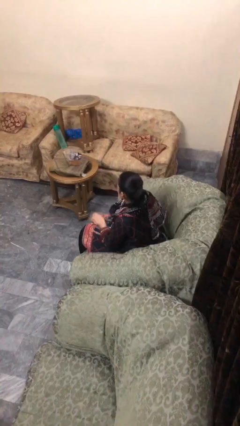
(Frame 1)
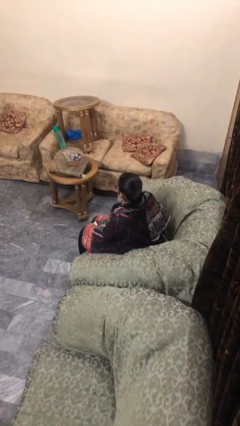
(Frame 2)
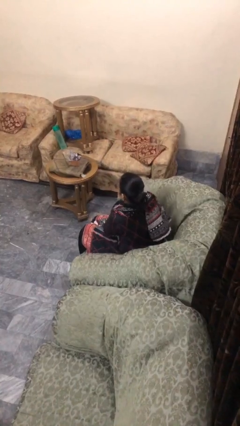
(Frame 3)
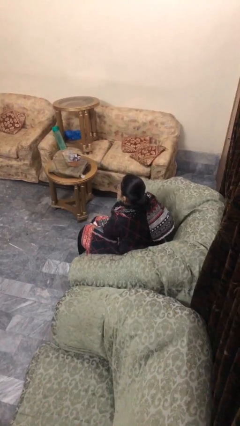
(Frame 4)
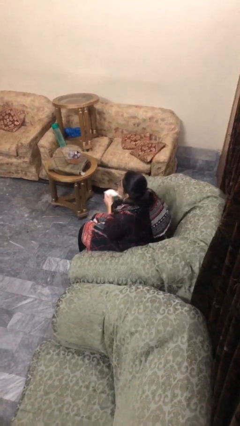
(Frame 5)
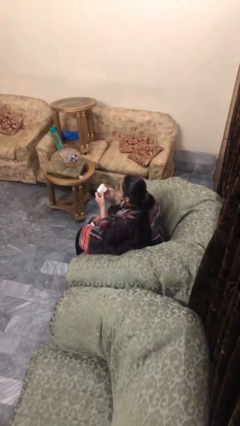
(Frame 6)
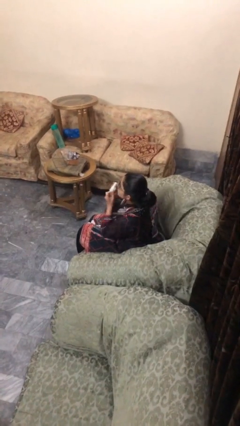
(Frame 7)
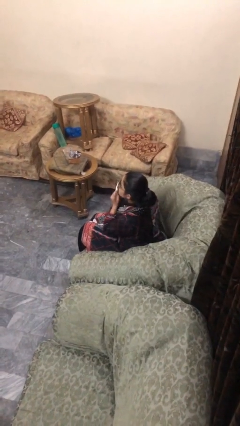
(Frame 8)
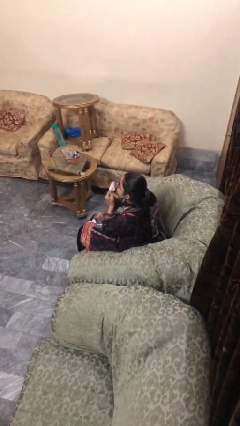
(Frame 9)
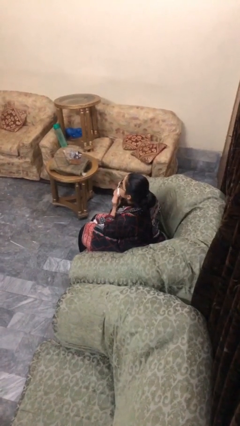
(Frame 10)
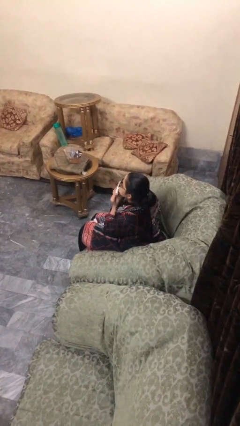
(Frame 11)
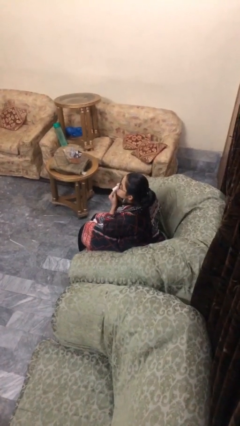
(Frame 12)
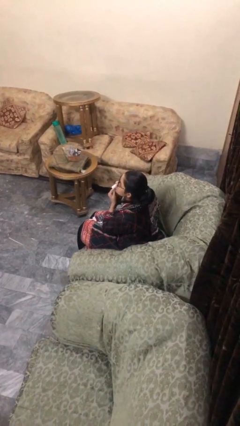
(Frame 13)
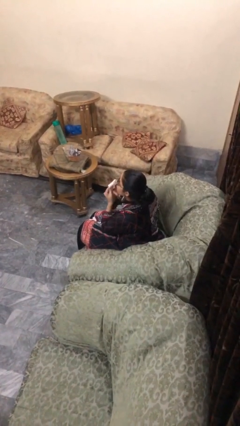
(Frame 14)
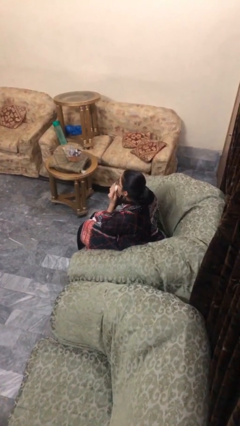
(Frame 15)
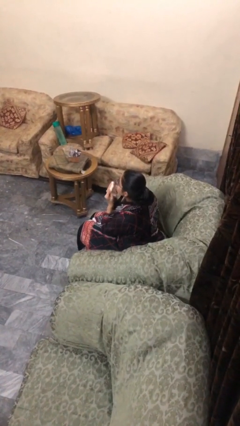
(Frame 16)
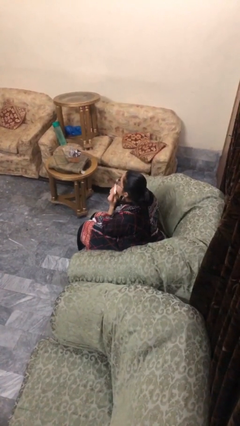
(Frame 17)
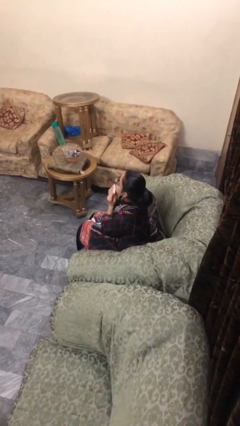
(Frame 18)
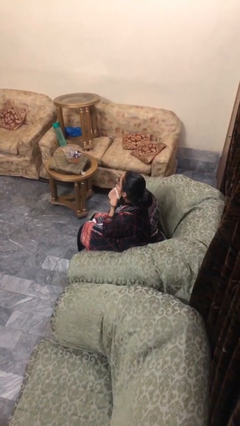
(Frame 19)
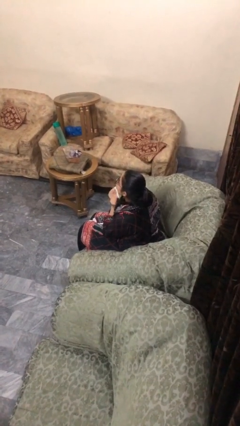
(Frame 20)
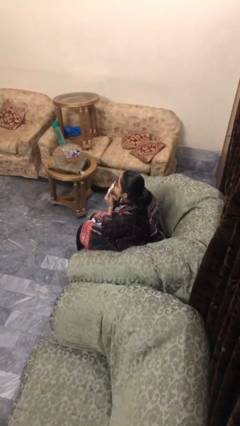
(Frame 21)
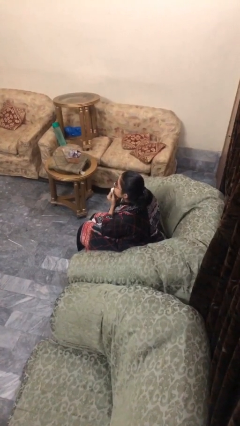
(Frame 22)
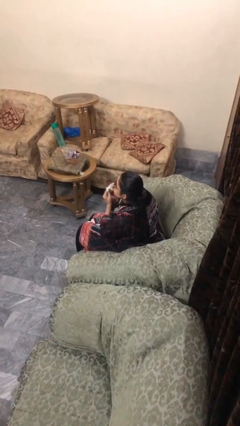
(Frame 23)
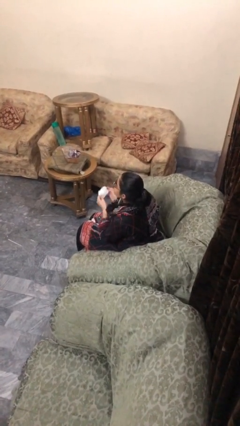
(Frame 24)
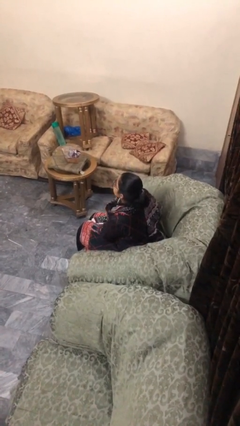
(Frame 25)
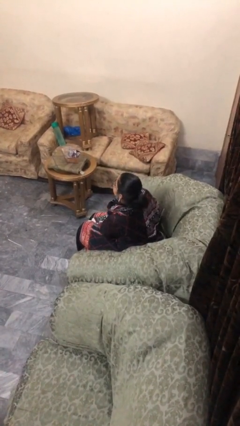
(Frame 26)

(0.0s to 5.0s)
person wipes mouth with napkin

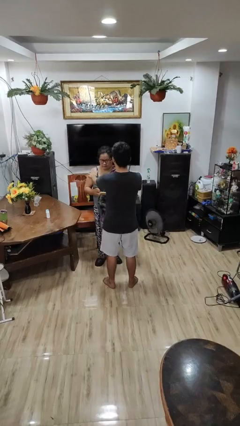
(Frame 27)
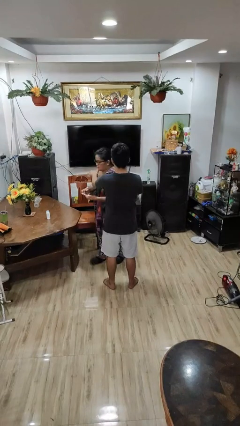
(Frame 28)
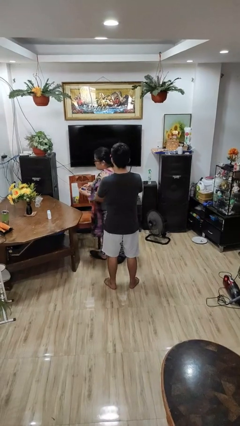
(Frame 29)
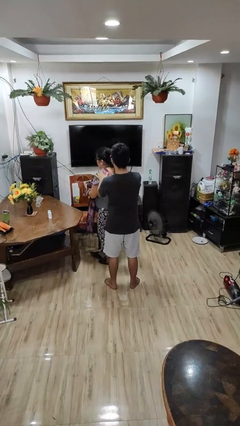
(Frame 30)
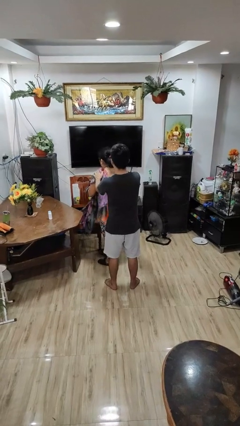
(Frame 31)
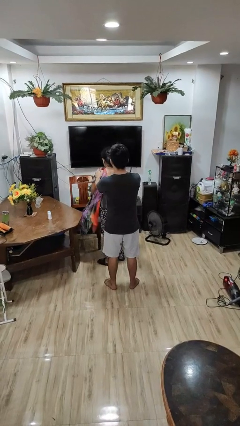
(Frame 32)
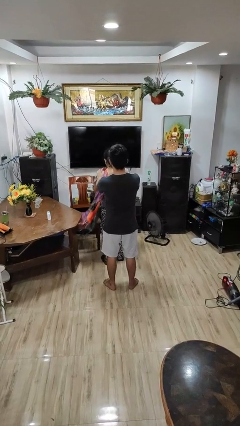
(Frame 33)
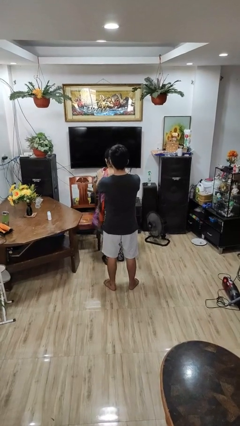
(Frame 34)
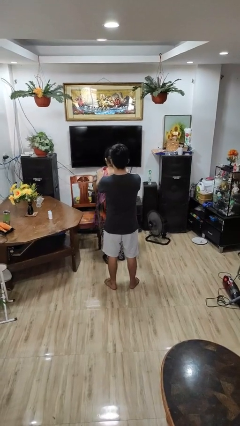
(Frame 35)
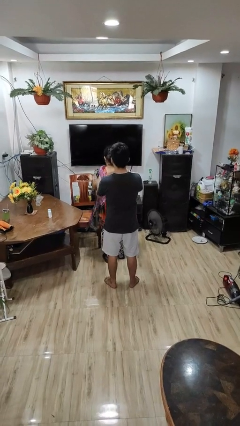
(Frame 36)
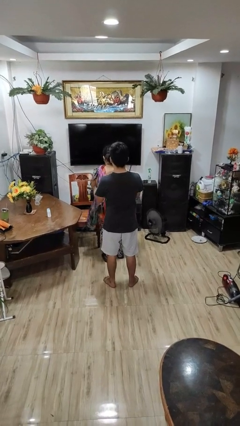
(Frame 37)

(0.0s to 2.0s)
person spins person around

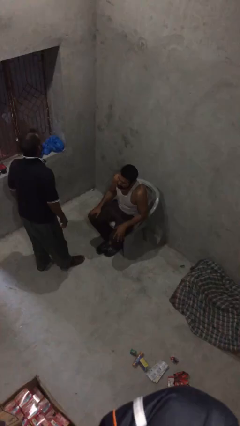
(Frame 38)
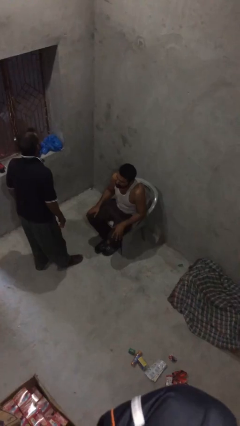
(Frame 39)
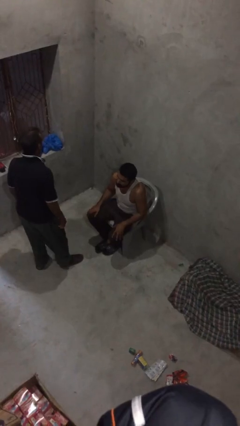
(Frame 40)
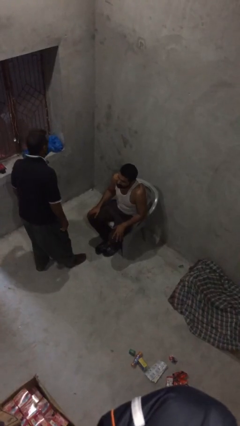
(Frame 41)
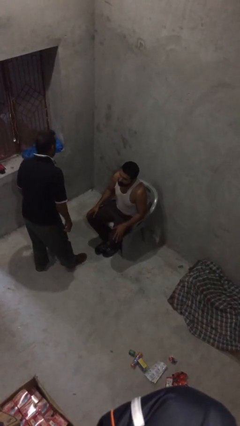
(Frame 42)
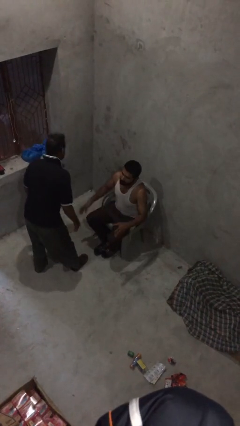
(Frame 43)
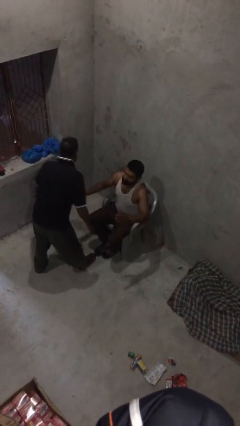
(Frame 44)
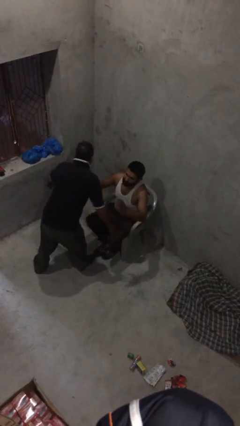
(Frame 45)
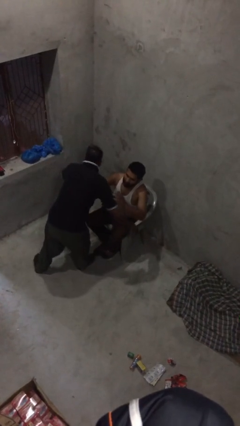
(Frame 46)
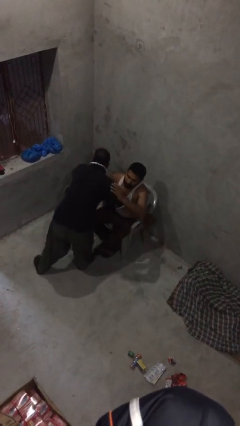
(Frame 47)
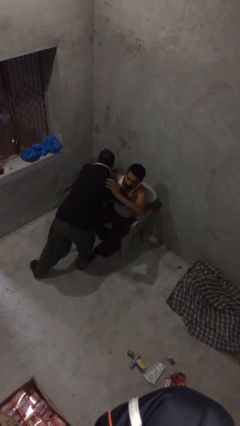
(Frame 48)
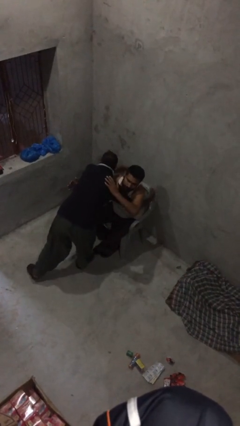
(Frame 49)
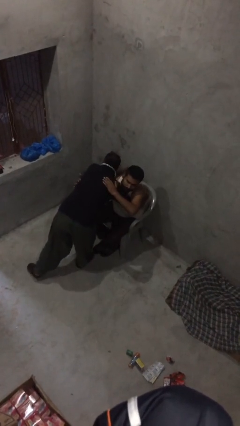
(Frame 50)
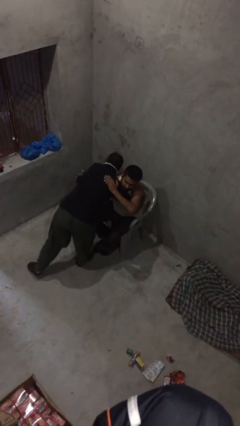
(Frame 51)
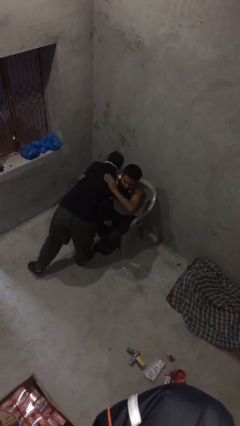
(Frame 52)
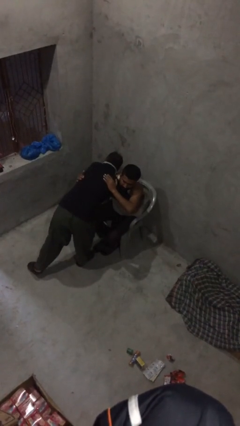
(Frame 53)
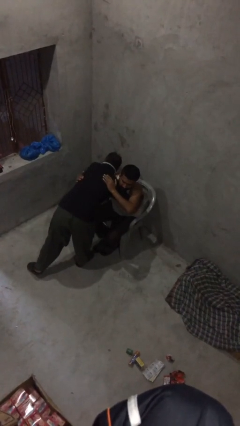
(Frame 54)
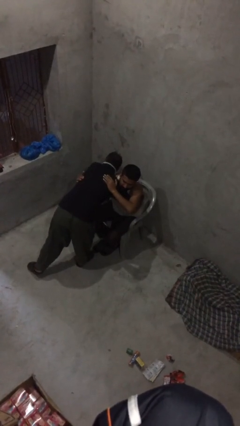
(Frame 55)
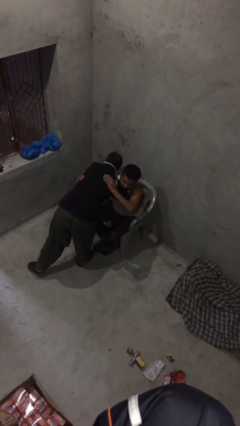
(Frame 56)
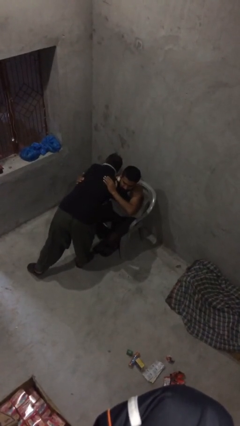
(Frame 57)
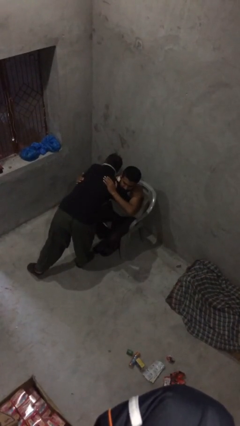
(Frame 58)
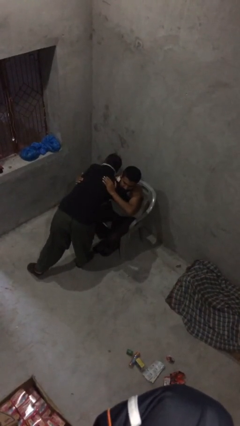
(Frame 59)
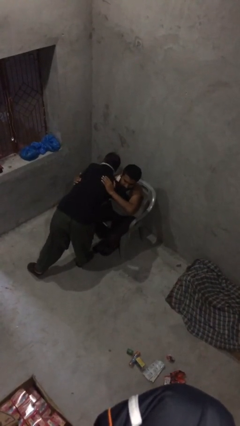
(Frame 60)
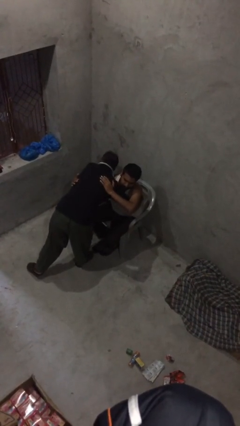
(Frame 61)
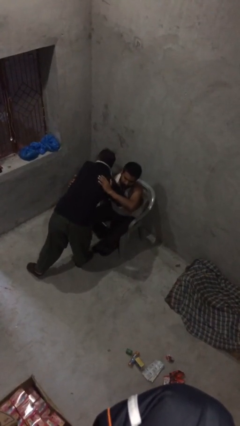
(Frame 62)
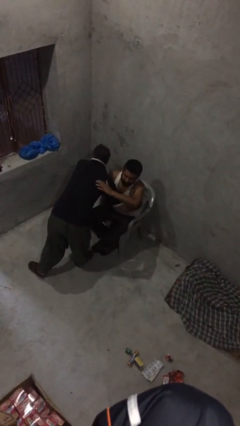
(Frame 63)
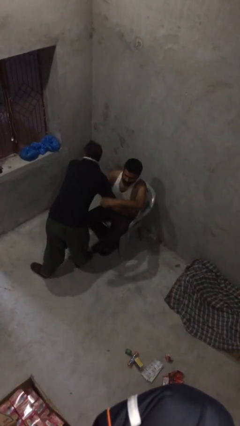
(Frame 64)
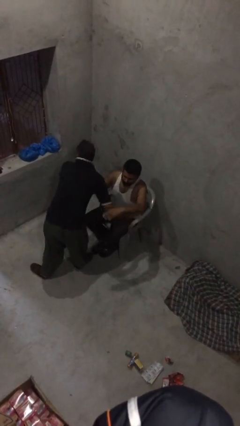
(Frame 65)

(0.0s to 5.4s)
person embraces person

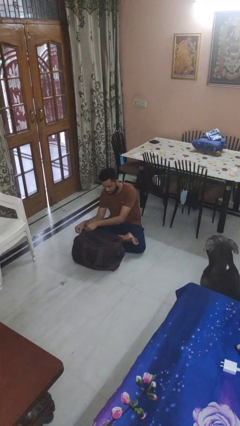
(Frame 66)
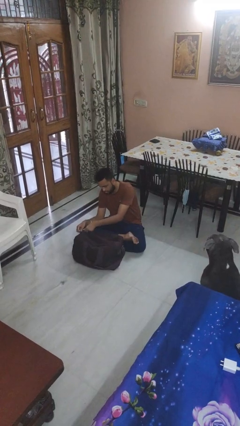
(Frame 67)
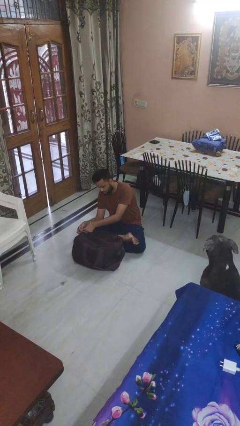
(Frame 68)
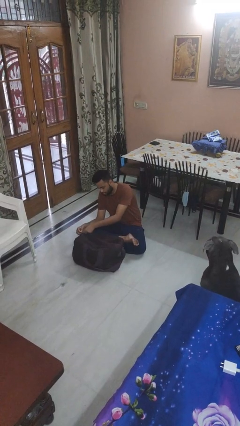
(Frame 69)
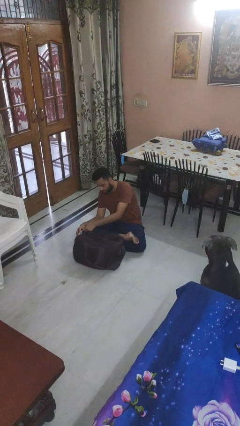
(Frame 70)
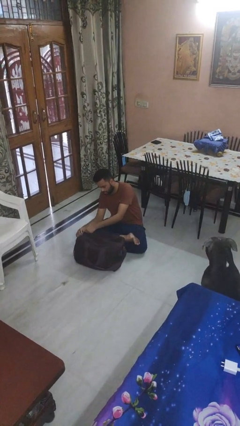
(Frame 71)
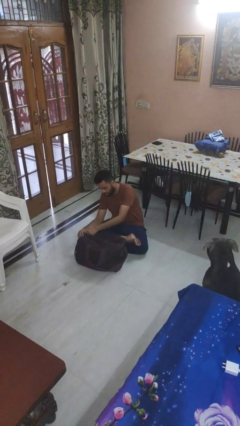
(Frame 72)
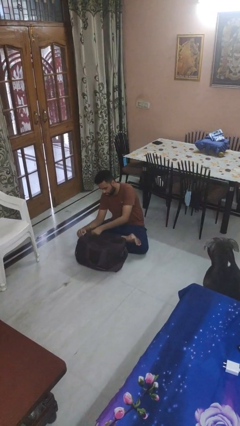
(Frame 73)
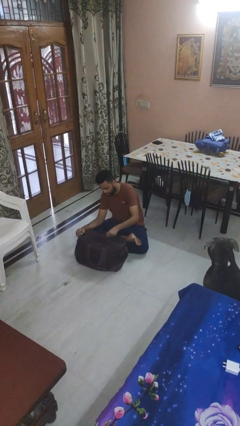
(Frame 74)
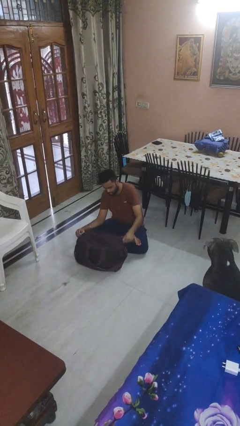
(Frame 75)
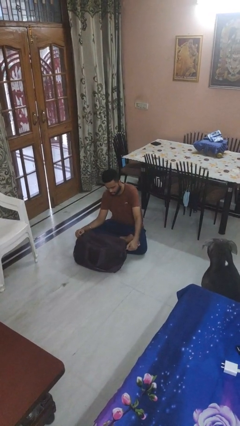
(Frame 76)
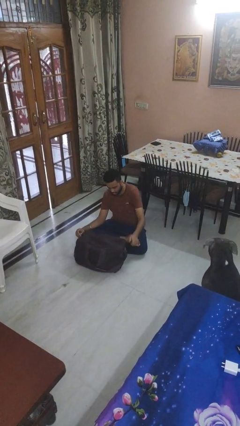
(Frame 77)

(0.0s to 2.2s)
person closes suitcase

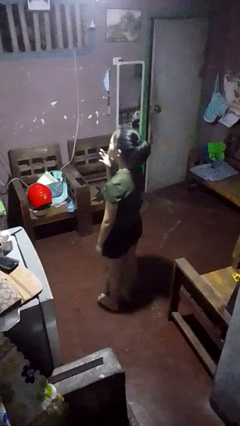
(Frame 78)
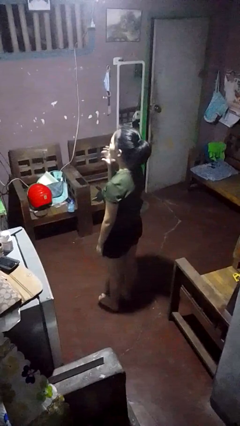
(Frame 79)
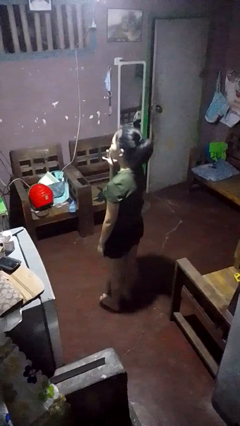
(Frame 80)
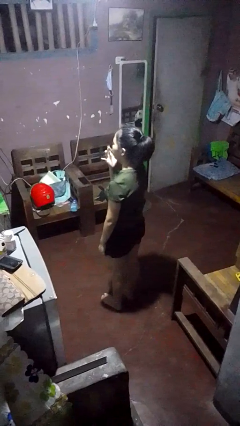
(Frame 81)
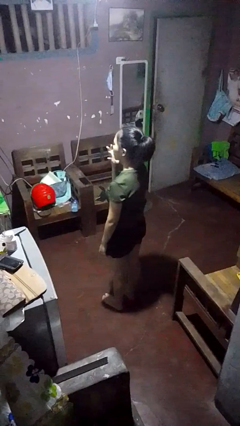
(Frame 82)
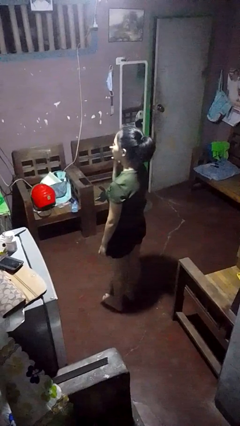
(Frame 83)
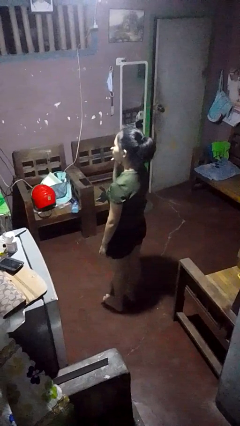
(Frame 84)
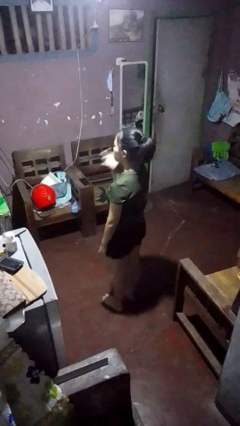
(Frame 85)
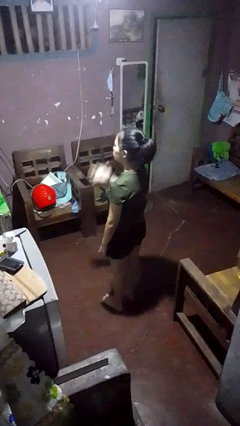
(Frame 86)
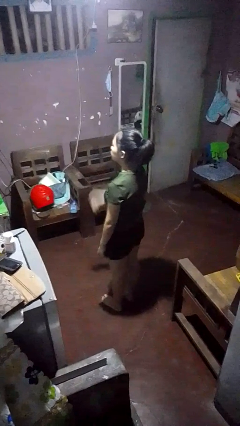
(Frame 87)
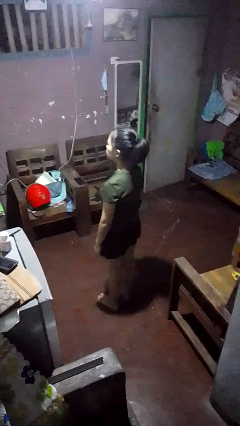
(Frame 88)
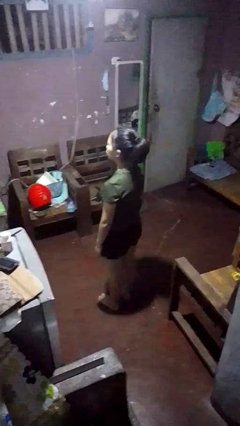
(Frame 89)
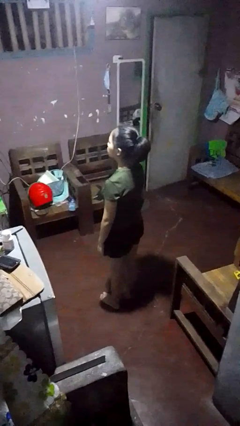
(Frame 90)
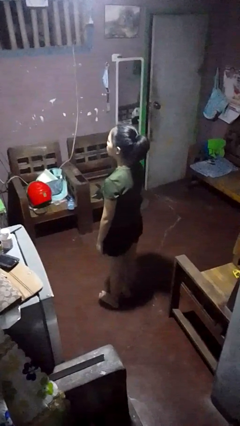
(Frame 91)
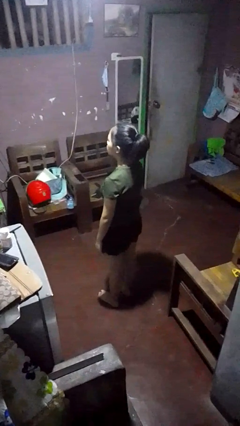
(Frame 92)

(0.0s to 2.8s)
person licks fingers

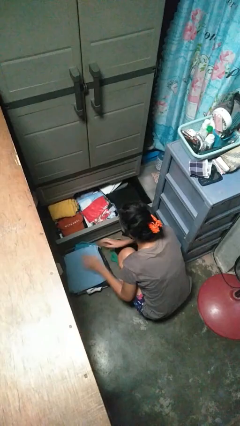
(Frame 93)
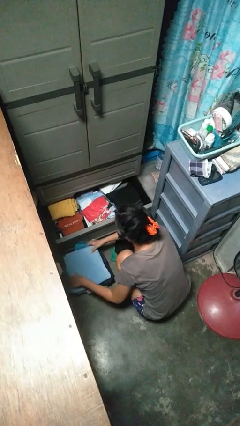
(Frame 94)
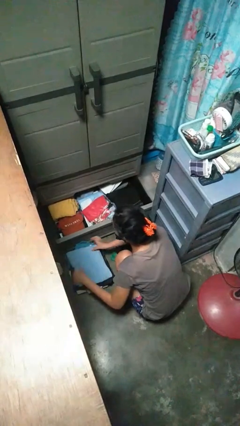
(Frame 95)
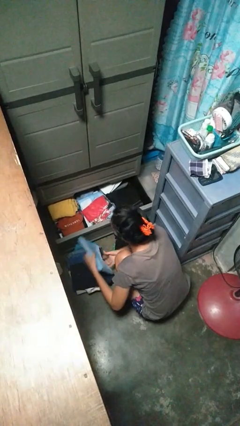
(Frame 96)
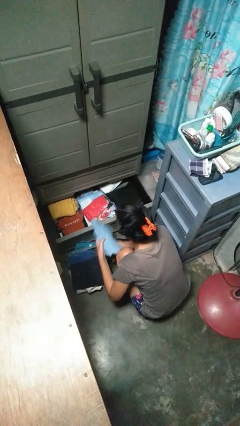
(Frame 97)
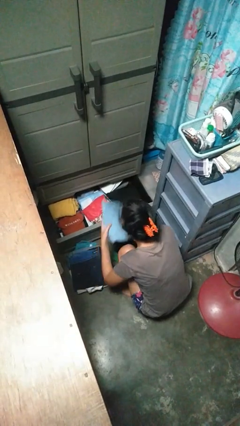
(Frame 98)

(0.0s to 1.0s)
person puts clothes into dresser
